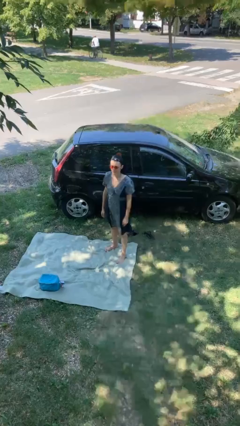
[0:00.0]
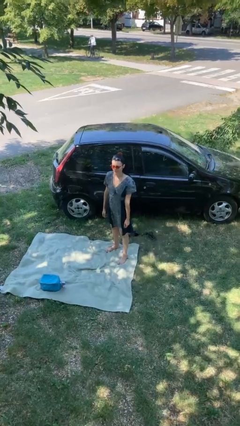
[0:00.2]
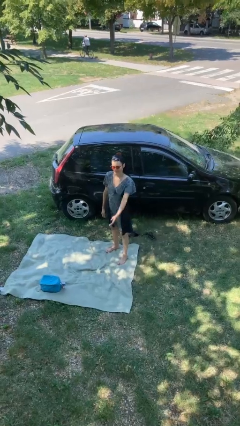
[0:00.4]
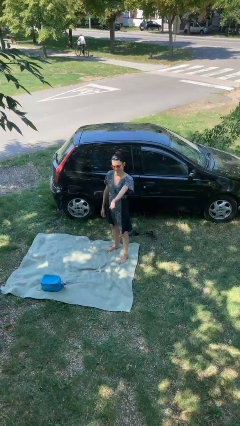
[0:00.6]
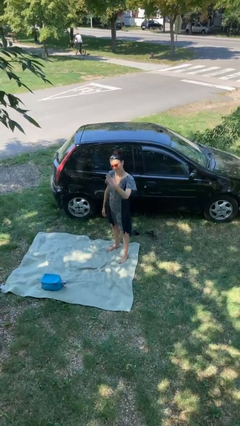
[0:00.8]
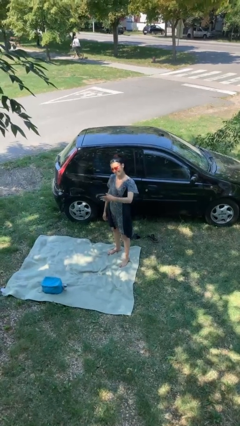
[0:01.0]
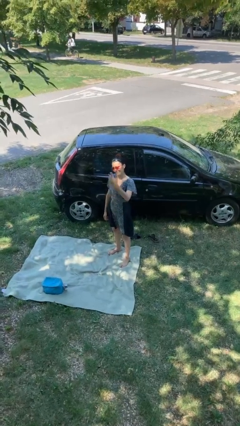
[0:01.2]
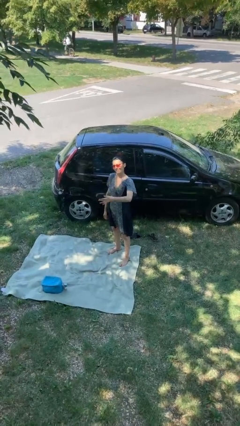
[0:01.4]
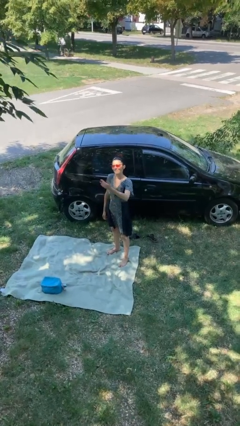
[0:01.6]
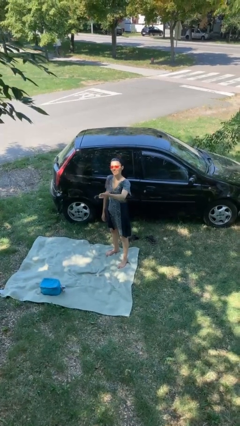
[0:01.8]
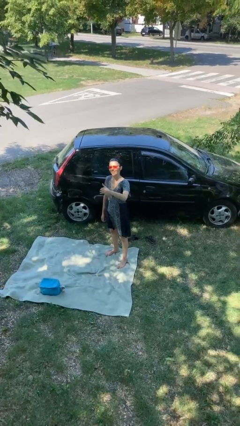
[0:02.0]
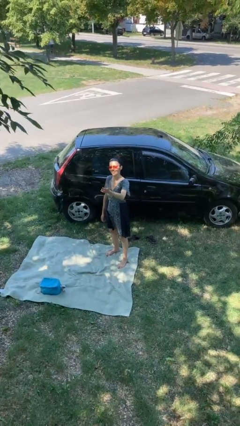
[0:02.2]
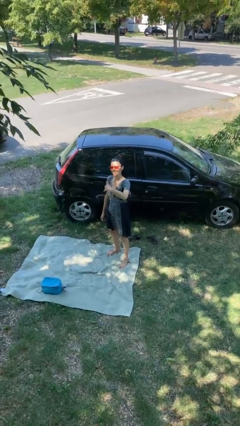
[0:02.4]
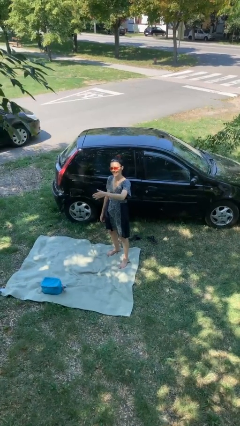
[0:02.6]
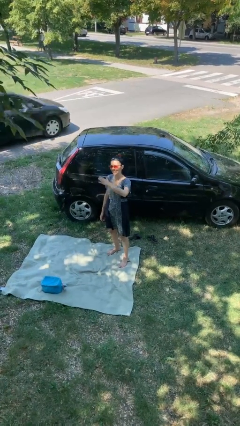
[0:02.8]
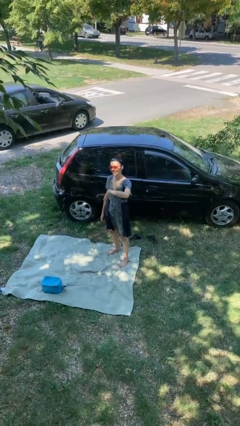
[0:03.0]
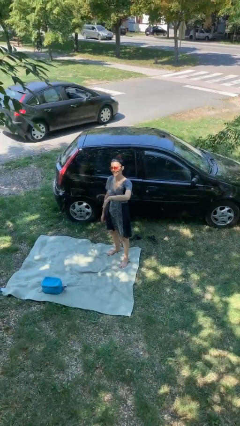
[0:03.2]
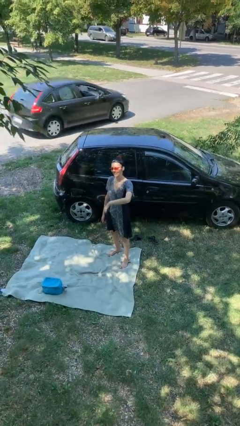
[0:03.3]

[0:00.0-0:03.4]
person gestures come here

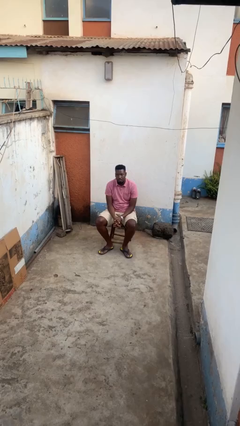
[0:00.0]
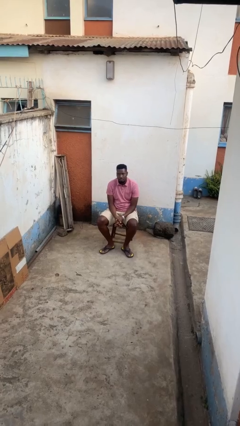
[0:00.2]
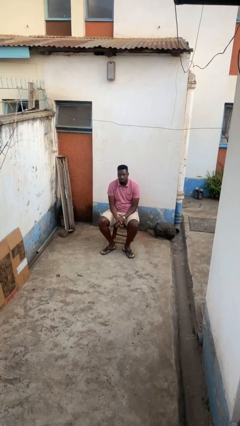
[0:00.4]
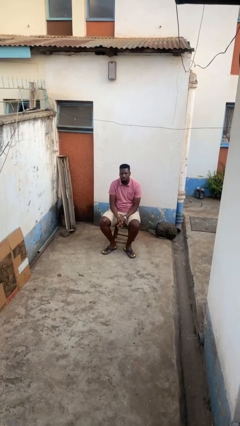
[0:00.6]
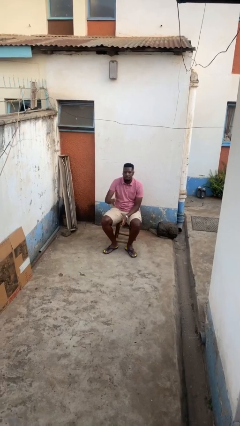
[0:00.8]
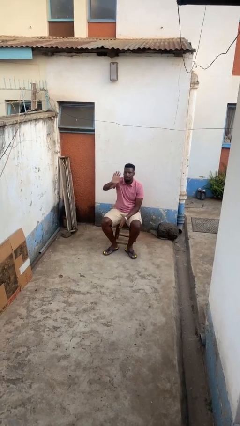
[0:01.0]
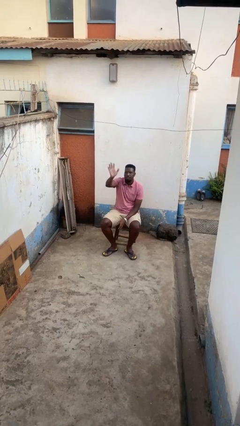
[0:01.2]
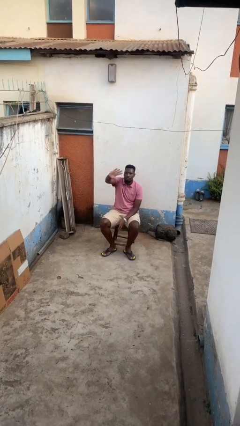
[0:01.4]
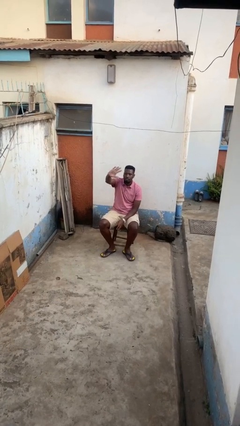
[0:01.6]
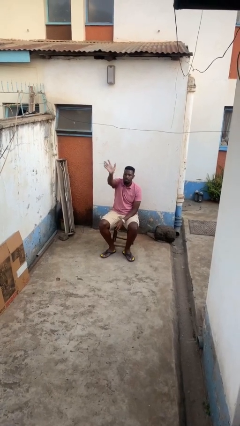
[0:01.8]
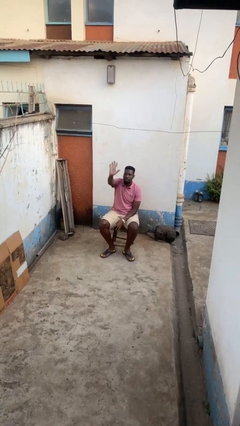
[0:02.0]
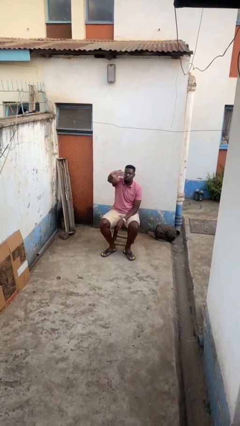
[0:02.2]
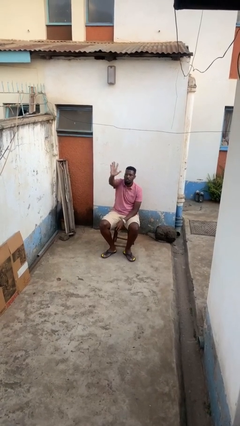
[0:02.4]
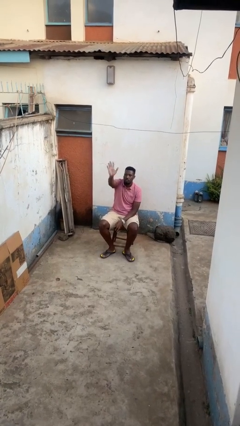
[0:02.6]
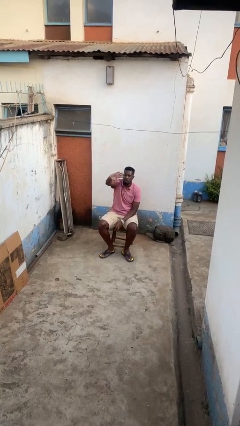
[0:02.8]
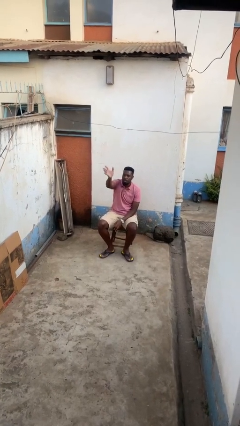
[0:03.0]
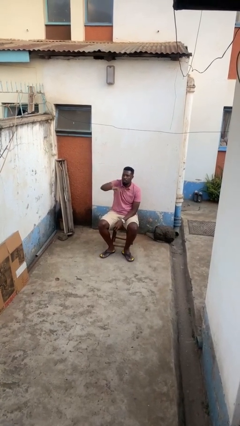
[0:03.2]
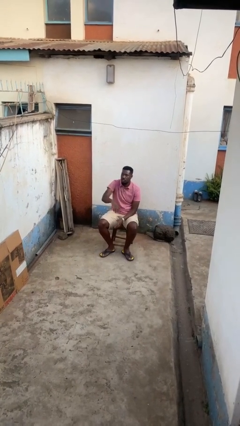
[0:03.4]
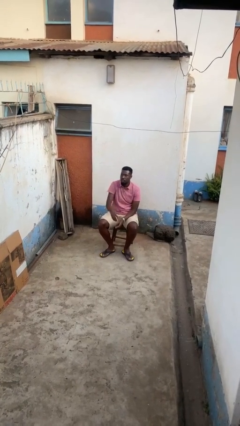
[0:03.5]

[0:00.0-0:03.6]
person waves at person

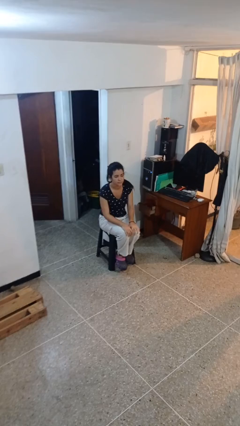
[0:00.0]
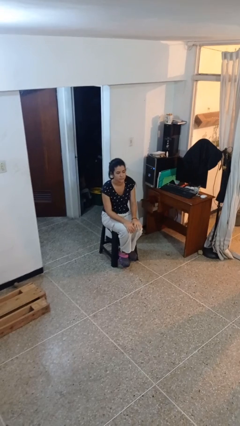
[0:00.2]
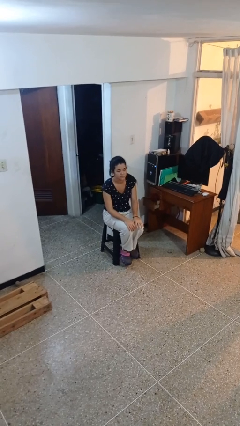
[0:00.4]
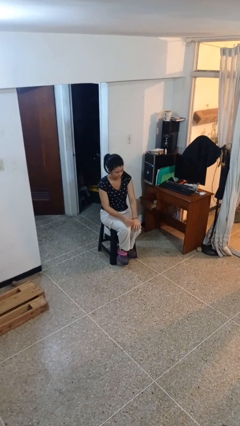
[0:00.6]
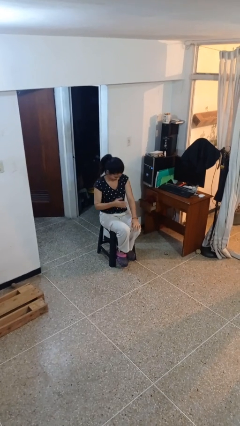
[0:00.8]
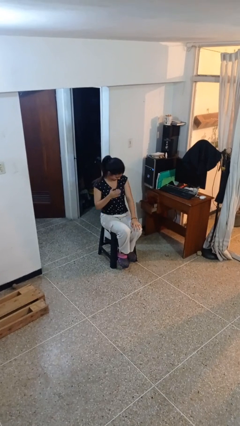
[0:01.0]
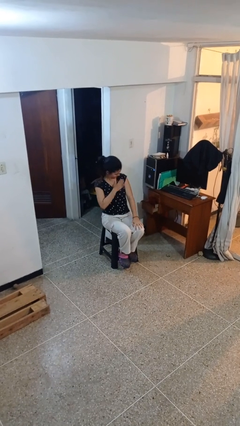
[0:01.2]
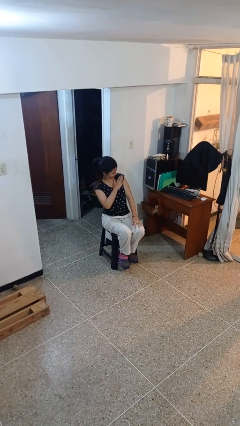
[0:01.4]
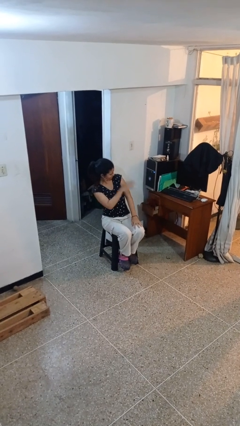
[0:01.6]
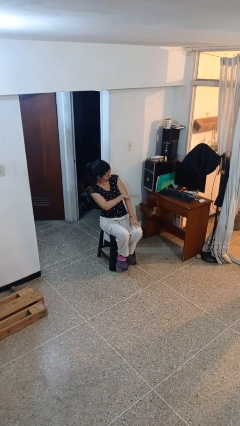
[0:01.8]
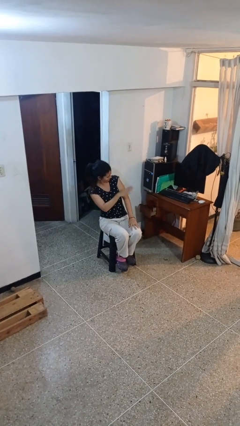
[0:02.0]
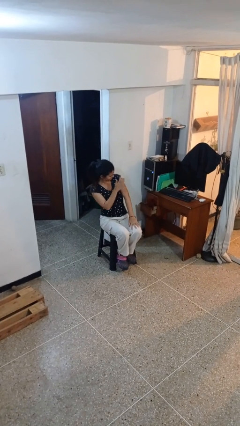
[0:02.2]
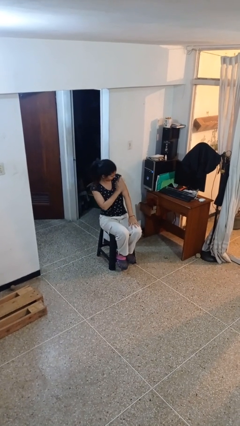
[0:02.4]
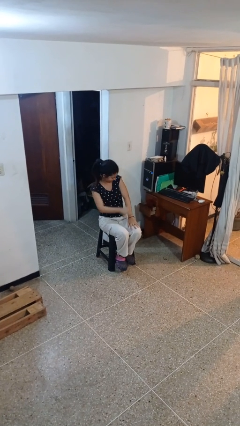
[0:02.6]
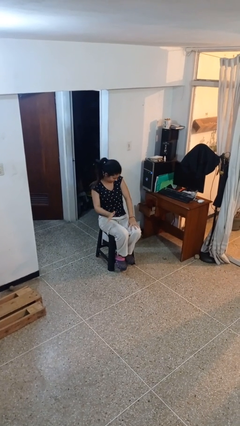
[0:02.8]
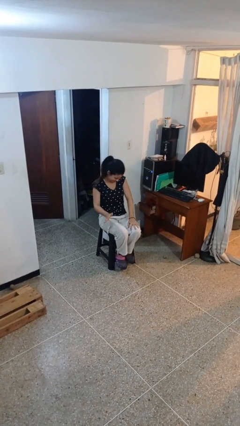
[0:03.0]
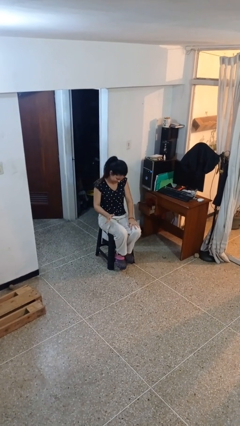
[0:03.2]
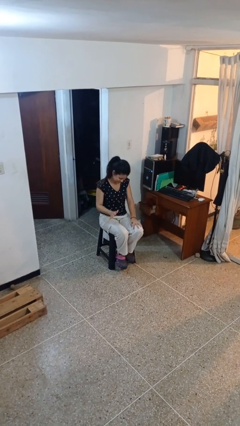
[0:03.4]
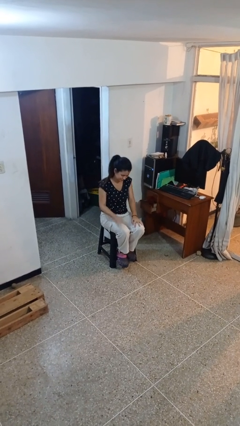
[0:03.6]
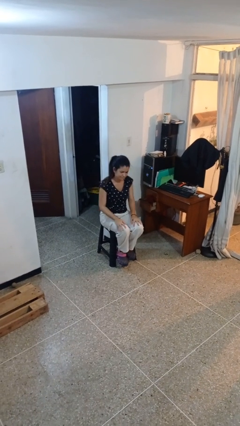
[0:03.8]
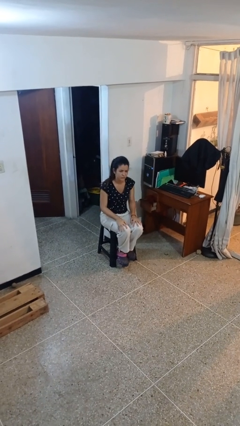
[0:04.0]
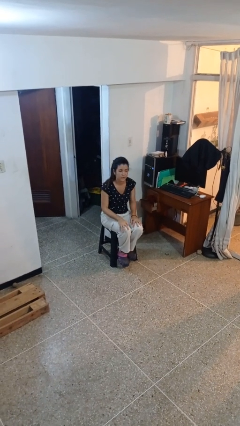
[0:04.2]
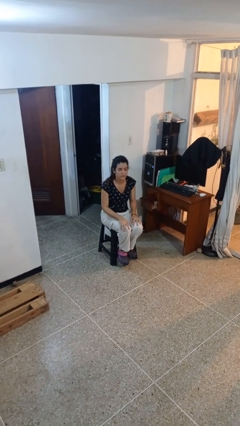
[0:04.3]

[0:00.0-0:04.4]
person swats bug

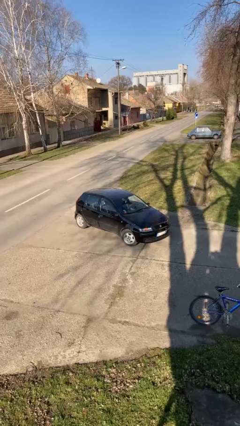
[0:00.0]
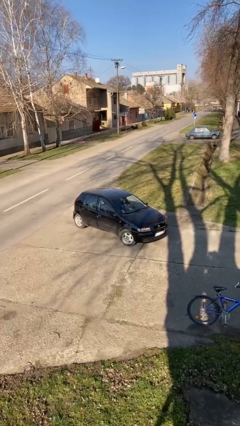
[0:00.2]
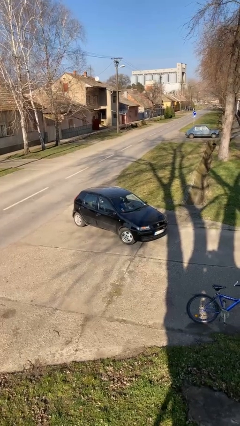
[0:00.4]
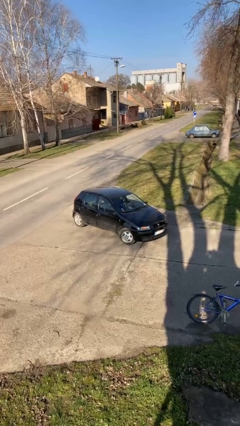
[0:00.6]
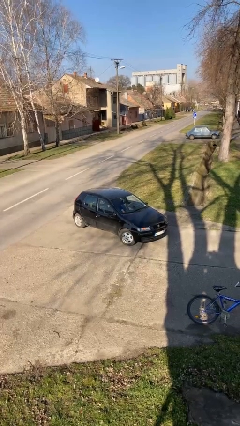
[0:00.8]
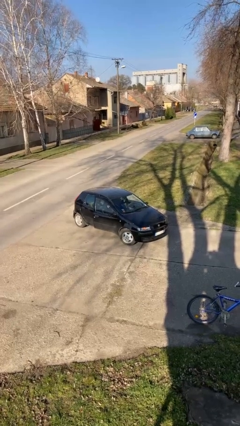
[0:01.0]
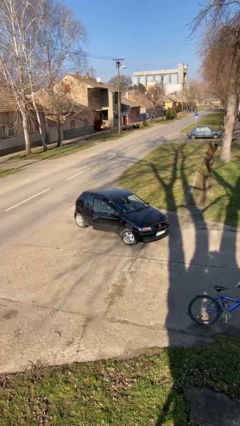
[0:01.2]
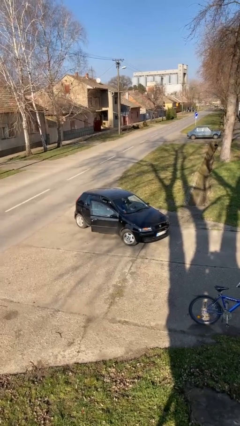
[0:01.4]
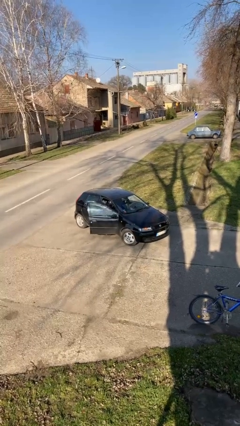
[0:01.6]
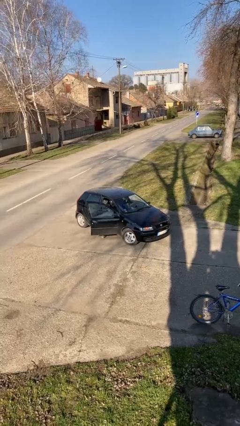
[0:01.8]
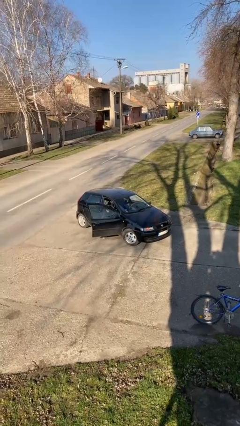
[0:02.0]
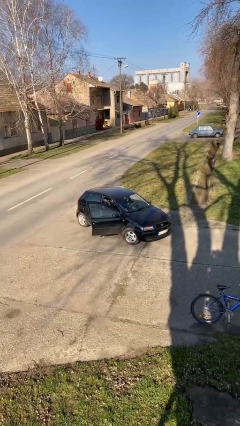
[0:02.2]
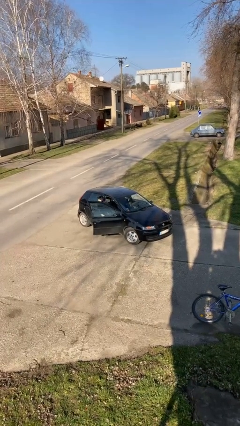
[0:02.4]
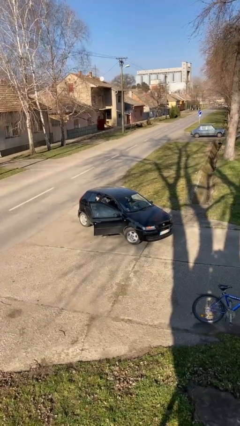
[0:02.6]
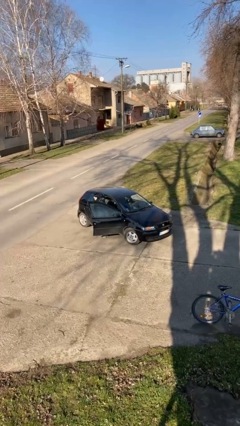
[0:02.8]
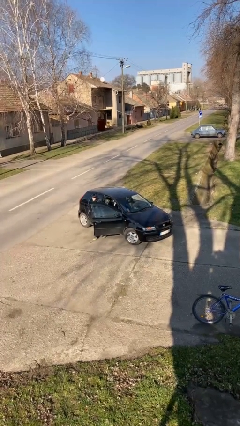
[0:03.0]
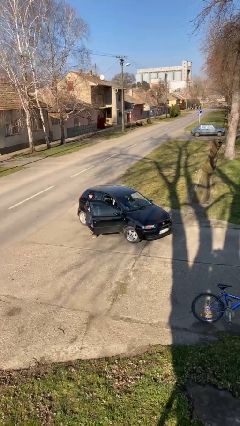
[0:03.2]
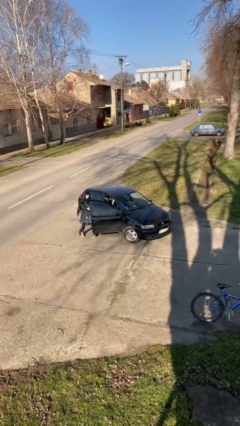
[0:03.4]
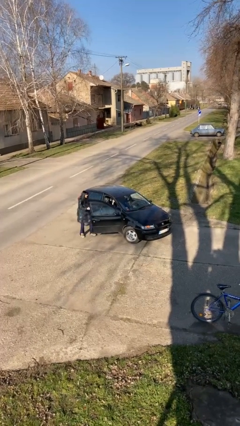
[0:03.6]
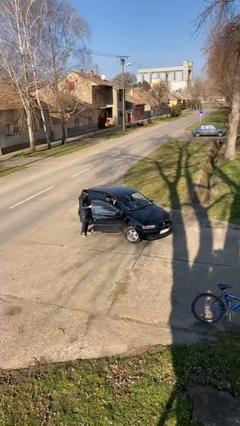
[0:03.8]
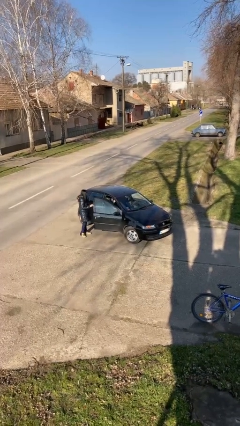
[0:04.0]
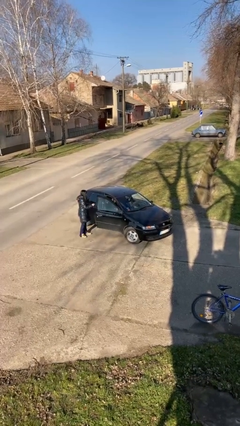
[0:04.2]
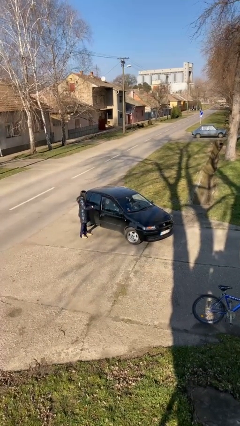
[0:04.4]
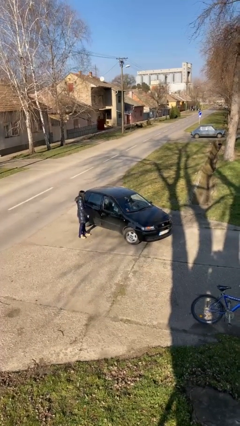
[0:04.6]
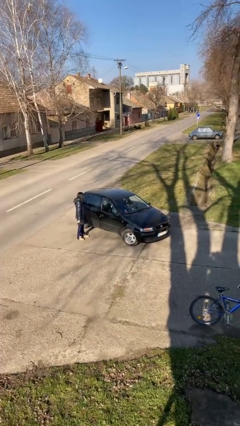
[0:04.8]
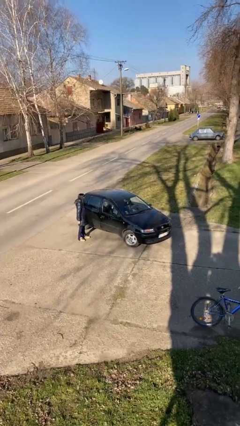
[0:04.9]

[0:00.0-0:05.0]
car drops off person

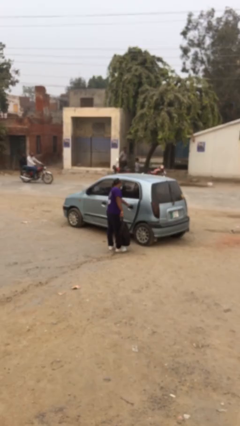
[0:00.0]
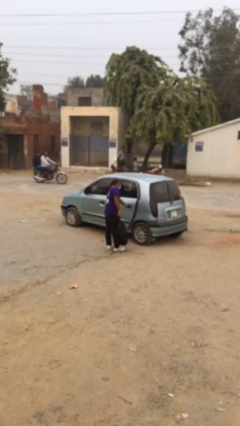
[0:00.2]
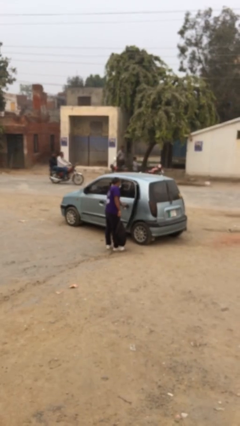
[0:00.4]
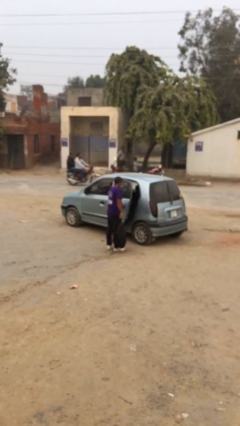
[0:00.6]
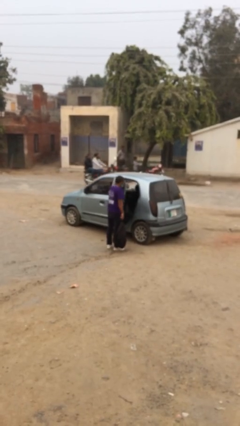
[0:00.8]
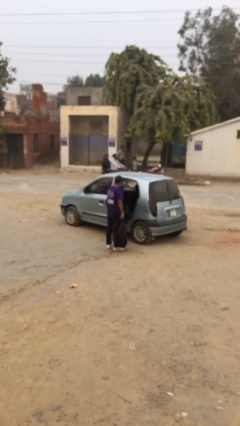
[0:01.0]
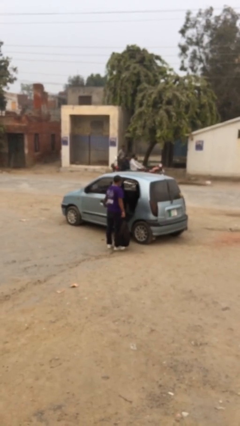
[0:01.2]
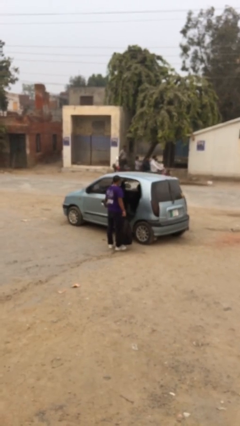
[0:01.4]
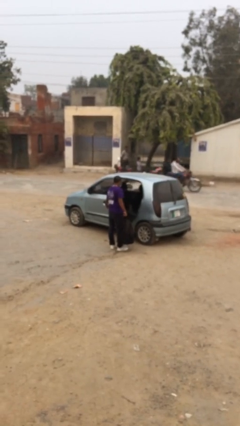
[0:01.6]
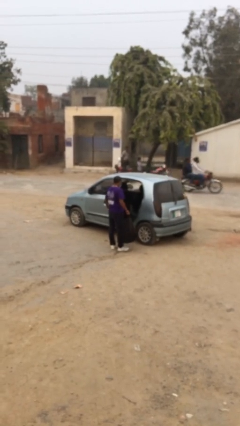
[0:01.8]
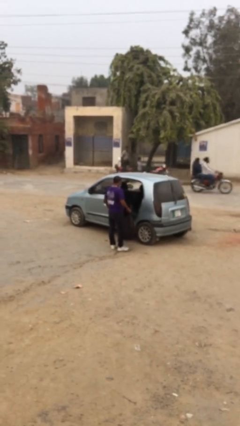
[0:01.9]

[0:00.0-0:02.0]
person opens car door
